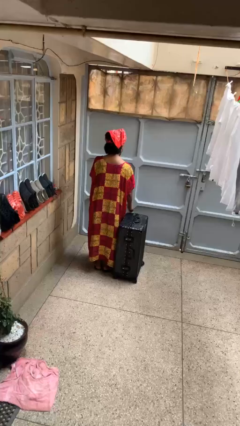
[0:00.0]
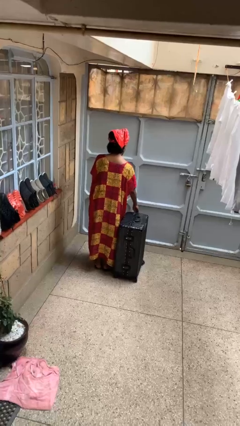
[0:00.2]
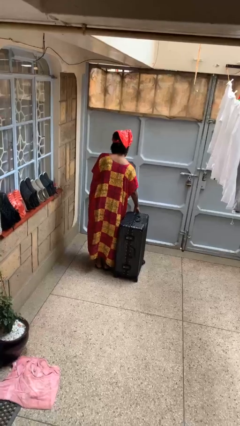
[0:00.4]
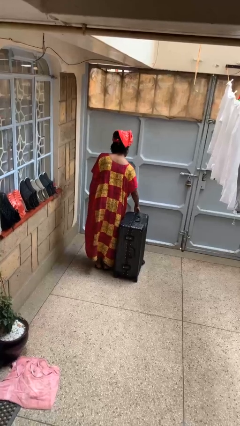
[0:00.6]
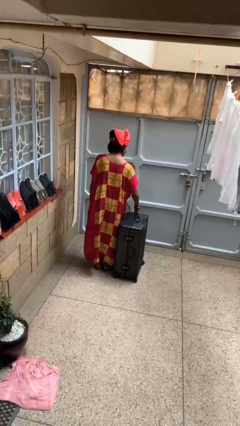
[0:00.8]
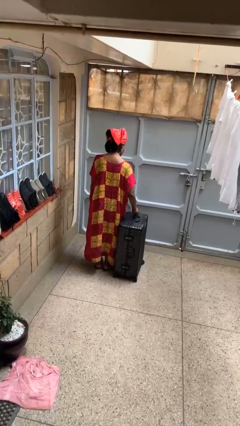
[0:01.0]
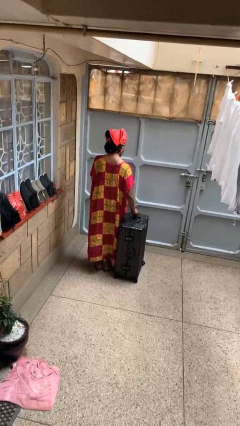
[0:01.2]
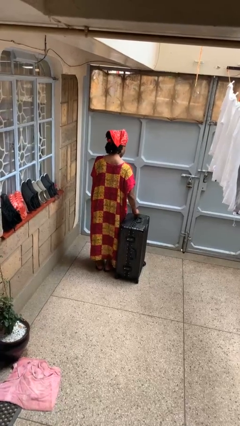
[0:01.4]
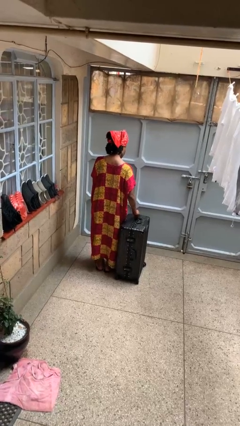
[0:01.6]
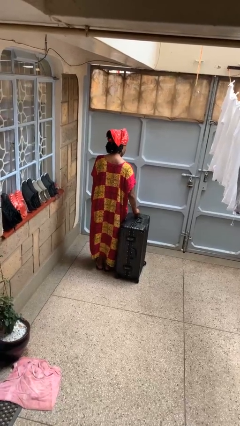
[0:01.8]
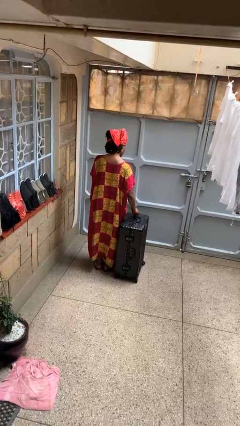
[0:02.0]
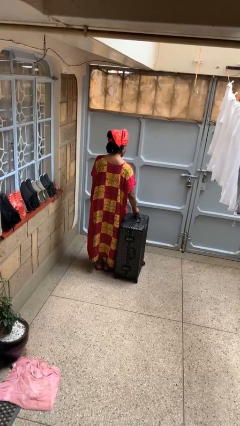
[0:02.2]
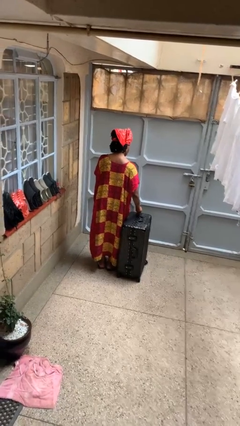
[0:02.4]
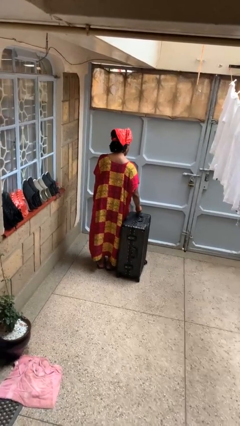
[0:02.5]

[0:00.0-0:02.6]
person opens suitcase

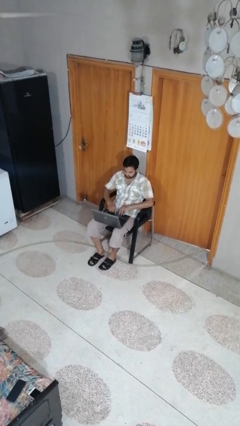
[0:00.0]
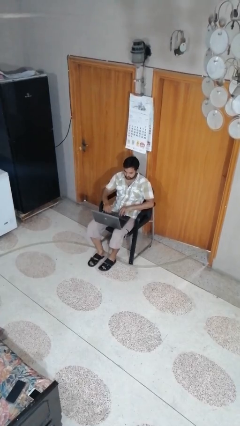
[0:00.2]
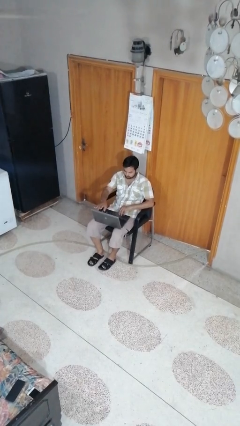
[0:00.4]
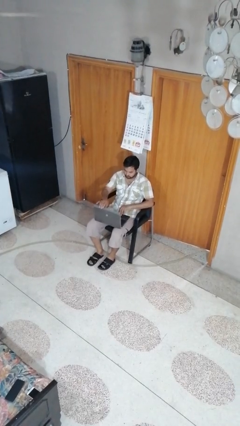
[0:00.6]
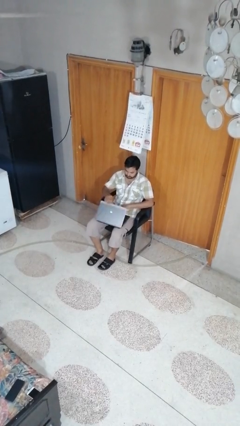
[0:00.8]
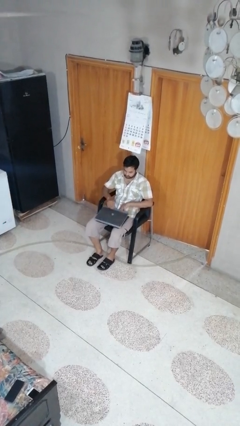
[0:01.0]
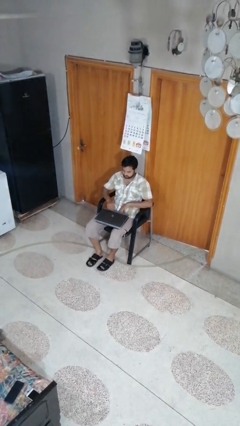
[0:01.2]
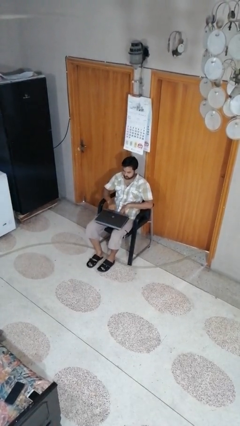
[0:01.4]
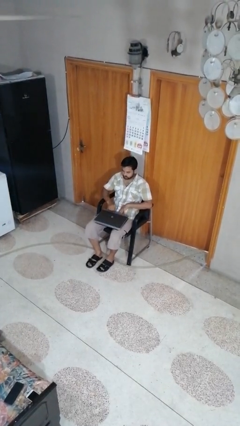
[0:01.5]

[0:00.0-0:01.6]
person closes laptop

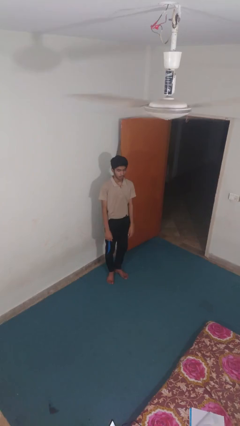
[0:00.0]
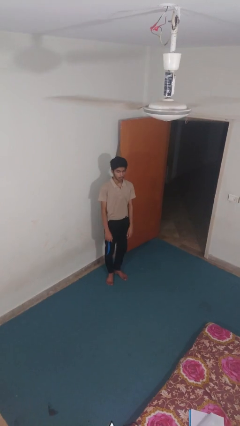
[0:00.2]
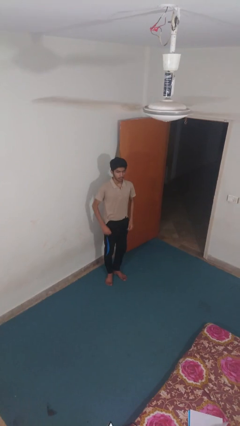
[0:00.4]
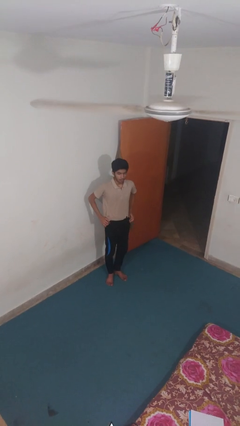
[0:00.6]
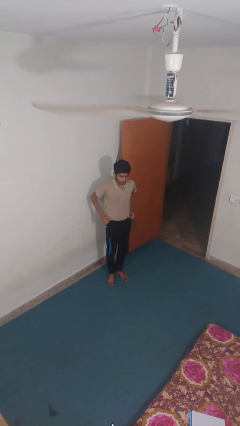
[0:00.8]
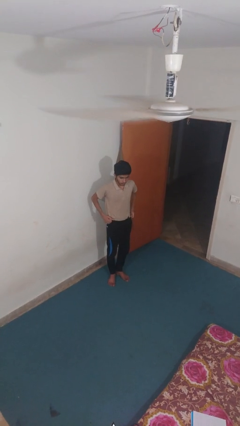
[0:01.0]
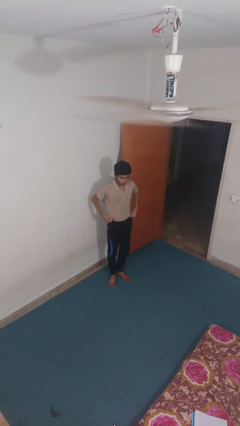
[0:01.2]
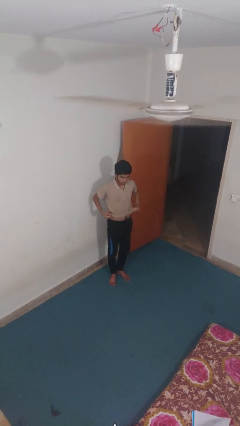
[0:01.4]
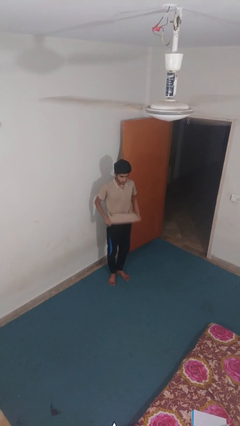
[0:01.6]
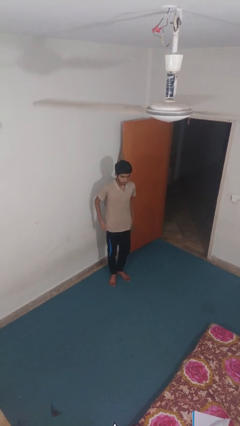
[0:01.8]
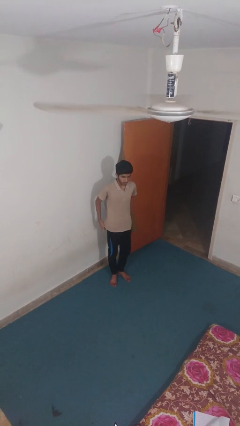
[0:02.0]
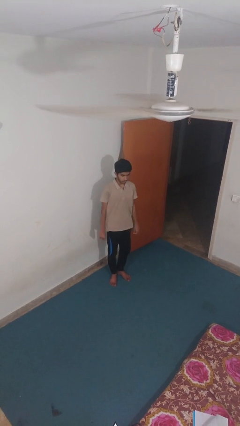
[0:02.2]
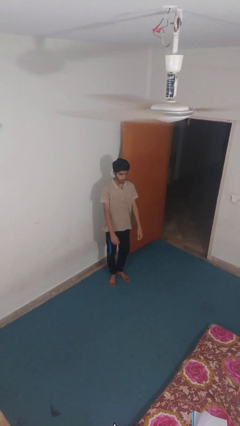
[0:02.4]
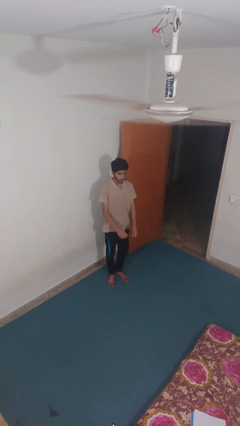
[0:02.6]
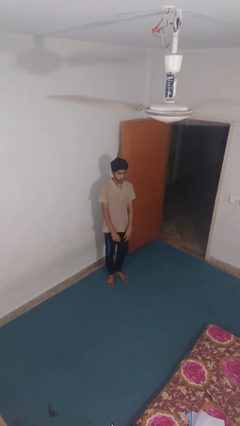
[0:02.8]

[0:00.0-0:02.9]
person untucks shirt

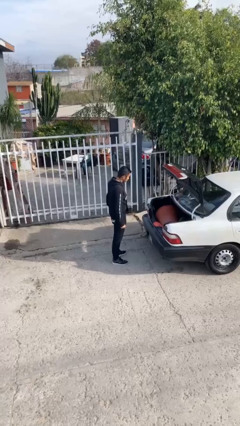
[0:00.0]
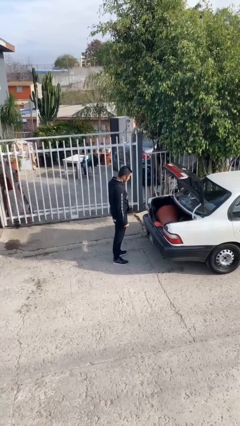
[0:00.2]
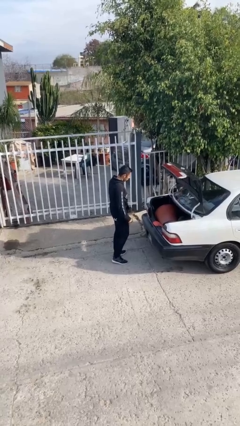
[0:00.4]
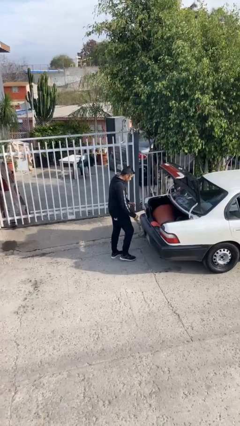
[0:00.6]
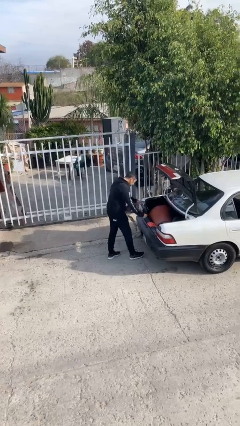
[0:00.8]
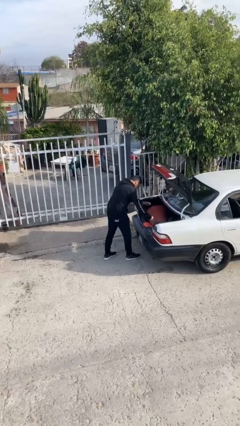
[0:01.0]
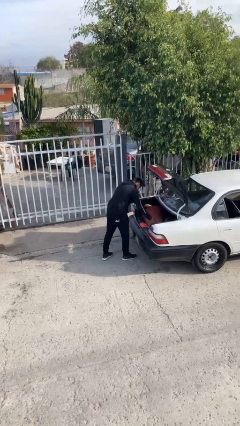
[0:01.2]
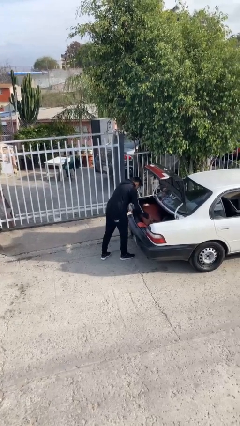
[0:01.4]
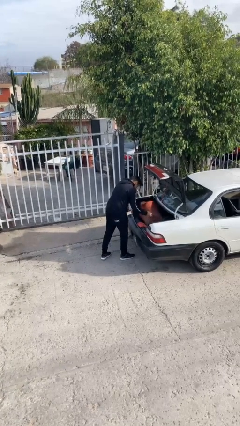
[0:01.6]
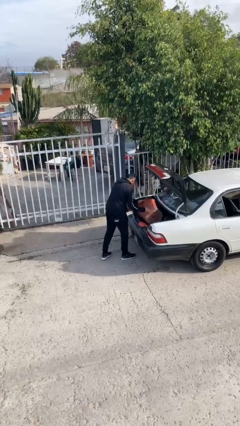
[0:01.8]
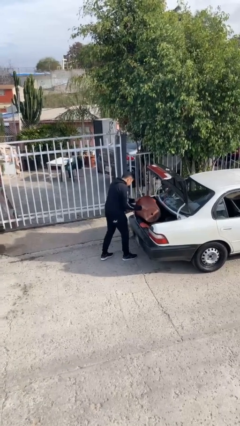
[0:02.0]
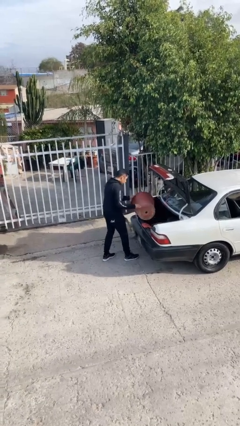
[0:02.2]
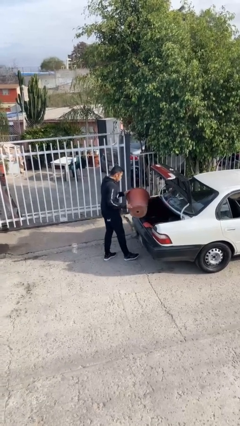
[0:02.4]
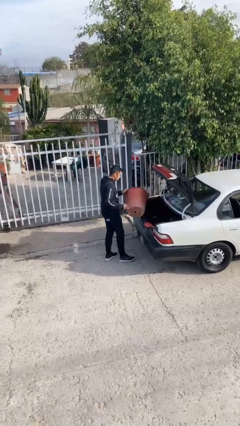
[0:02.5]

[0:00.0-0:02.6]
person unloads car

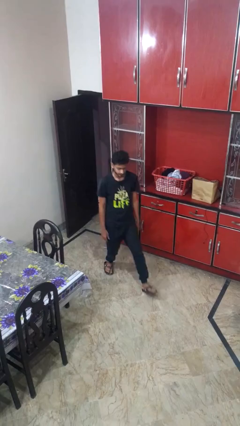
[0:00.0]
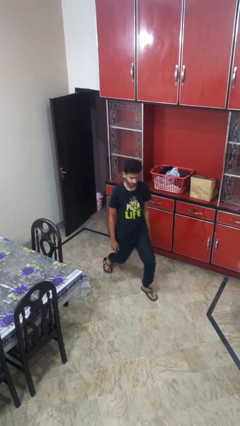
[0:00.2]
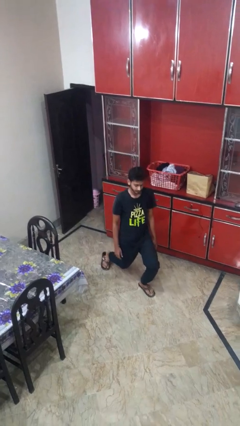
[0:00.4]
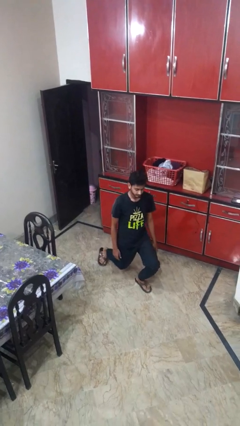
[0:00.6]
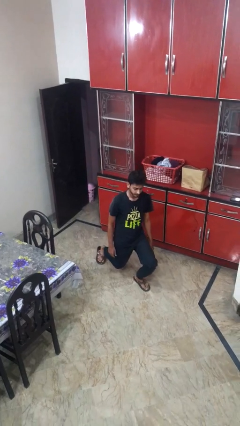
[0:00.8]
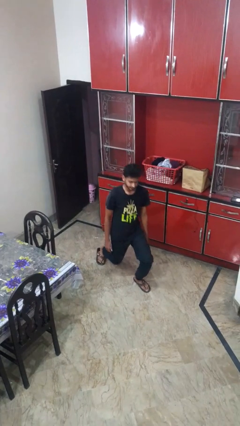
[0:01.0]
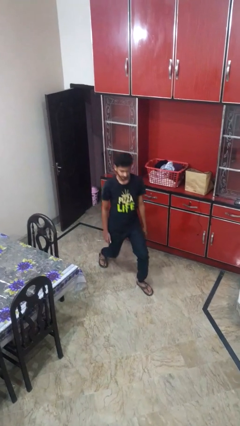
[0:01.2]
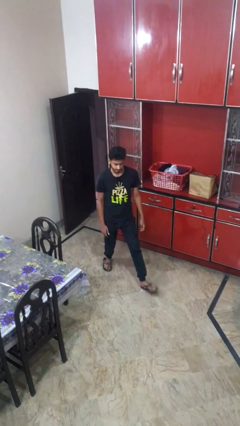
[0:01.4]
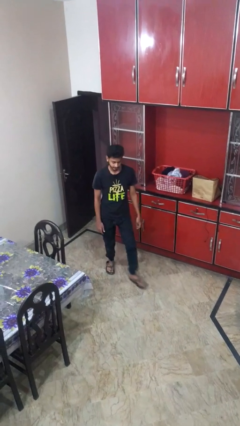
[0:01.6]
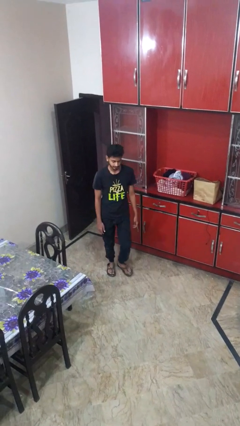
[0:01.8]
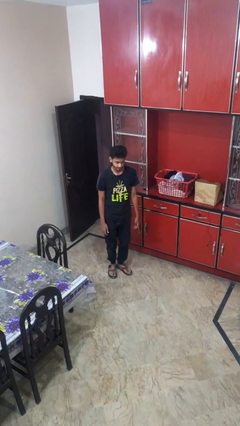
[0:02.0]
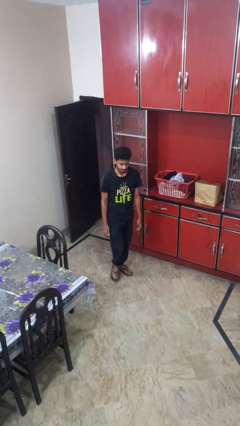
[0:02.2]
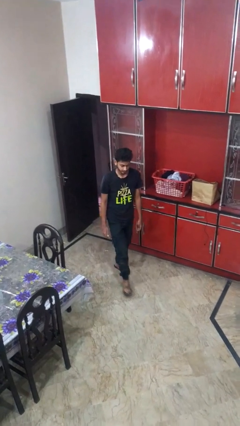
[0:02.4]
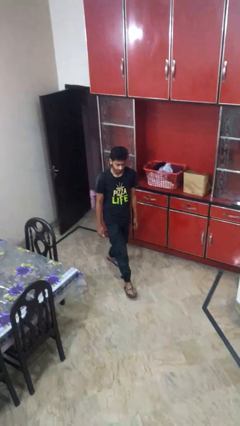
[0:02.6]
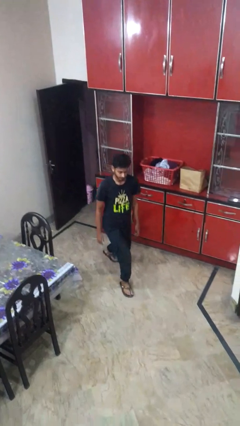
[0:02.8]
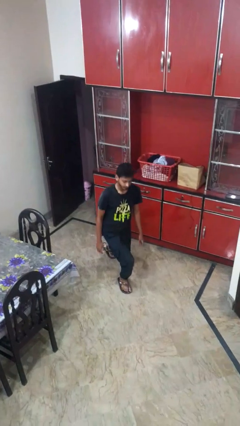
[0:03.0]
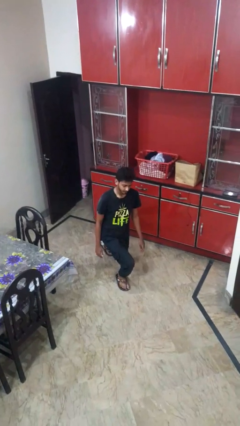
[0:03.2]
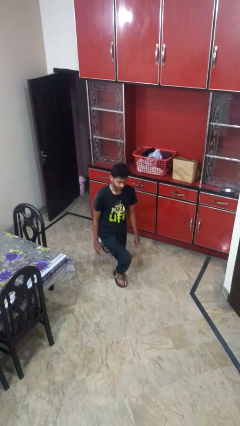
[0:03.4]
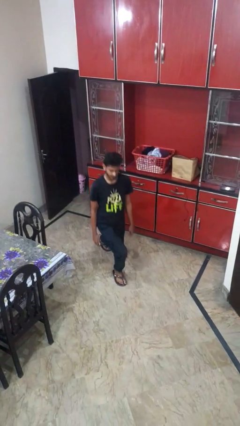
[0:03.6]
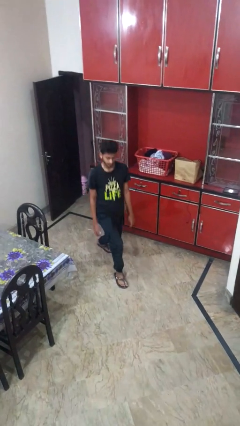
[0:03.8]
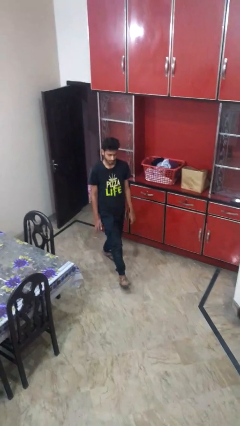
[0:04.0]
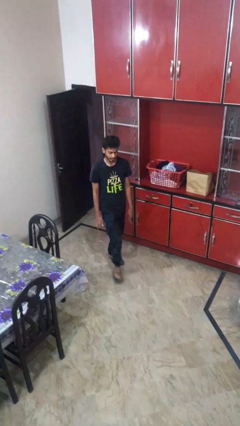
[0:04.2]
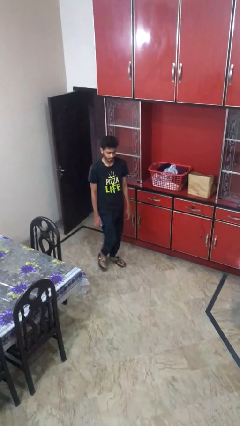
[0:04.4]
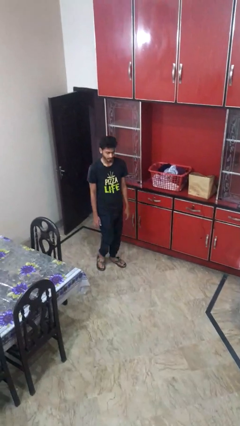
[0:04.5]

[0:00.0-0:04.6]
person exercises with lunges

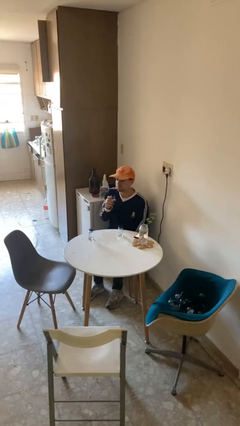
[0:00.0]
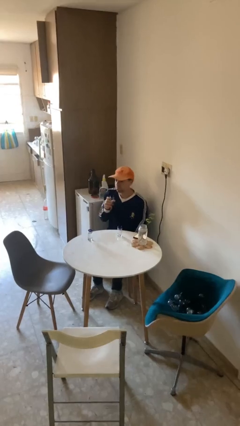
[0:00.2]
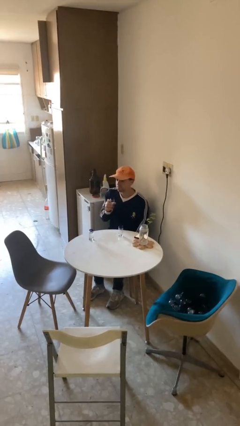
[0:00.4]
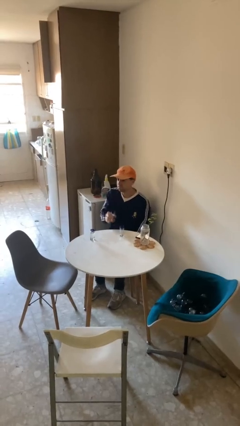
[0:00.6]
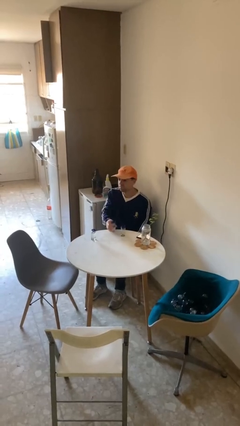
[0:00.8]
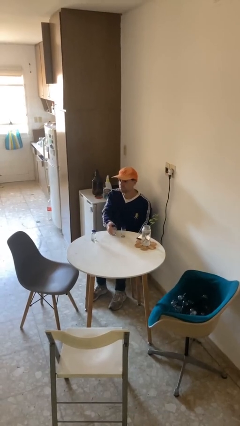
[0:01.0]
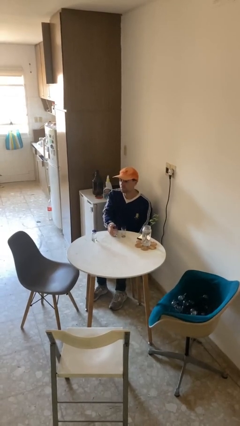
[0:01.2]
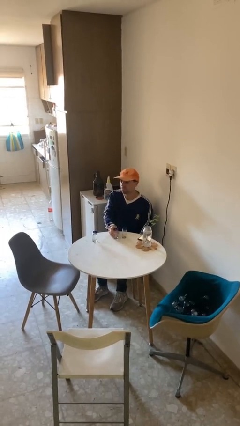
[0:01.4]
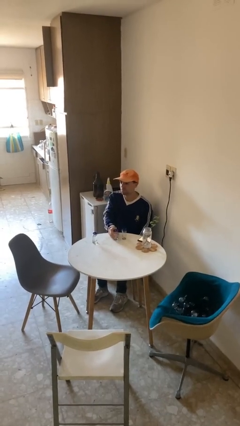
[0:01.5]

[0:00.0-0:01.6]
person puts down object on table

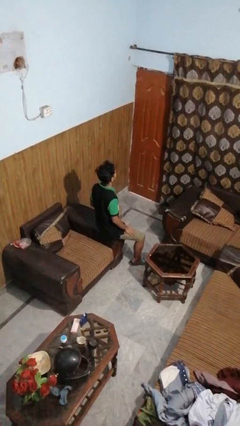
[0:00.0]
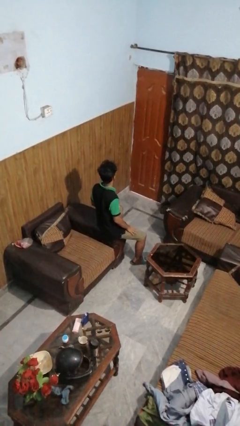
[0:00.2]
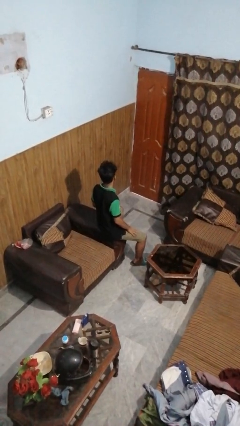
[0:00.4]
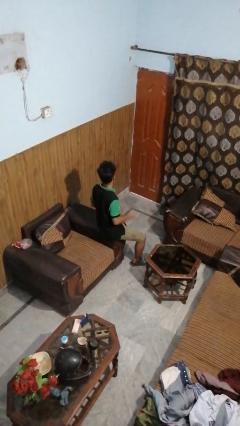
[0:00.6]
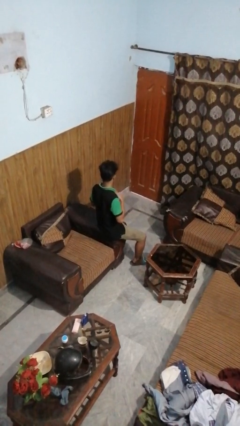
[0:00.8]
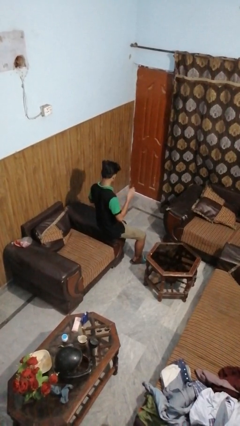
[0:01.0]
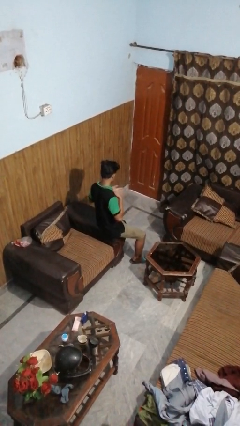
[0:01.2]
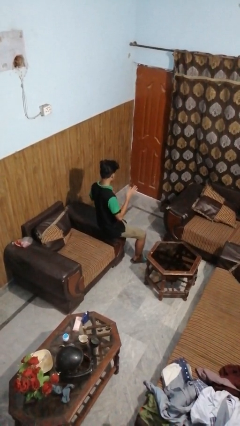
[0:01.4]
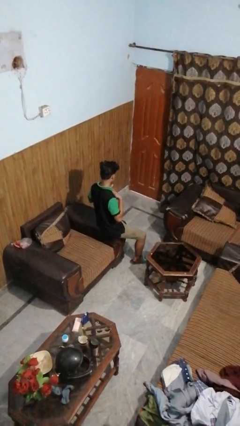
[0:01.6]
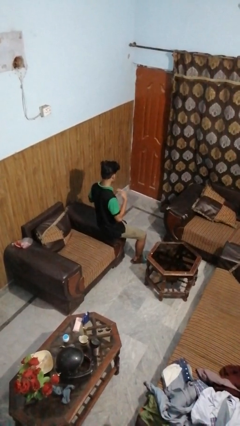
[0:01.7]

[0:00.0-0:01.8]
person drums on chest
